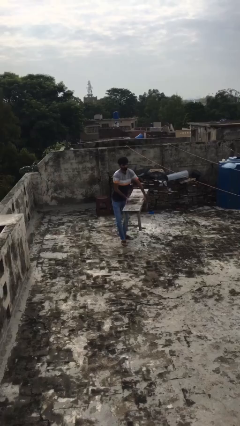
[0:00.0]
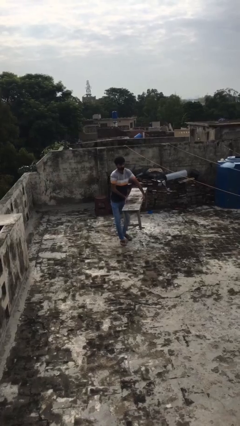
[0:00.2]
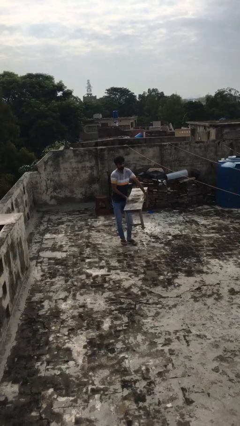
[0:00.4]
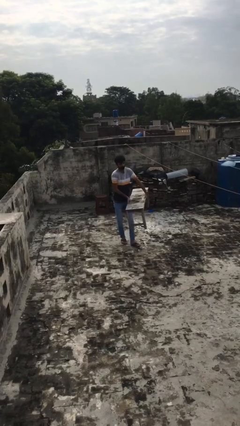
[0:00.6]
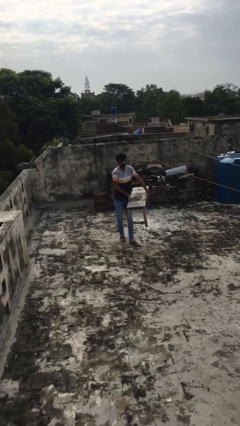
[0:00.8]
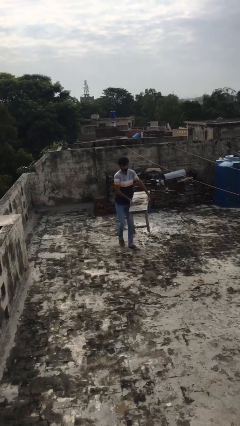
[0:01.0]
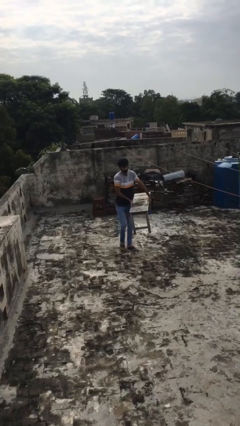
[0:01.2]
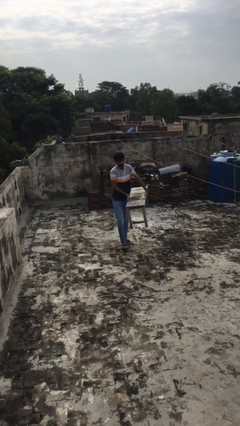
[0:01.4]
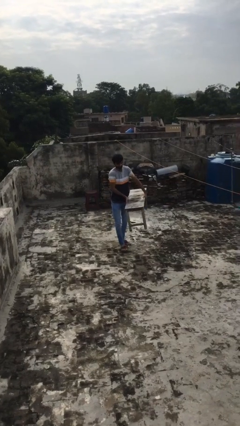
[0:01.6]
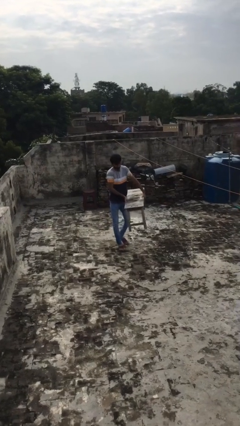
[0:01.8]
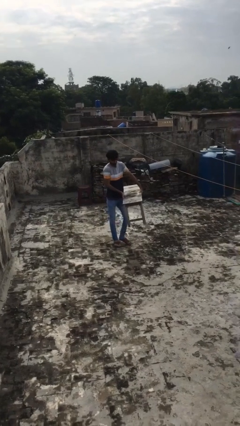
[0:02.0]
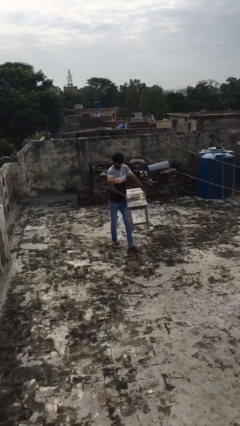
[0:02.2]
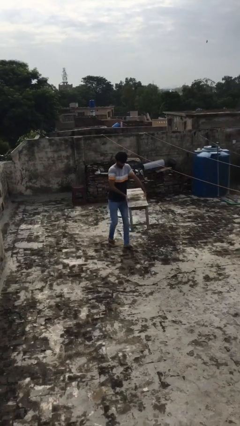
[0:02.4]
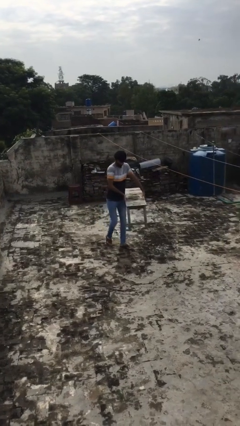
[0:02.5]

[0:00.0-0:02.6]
person carries heavy object

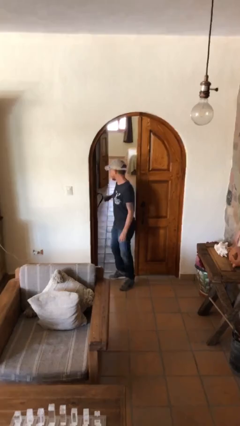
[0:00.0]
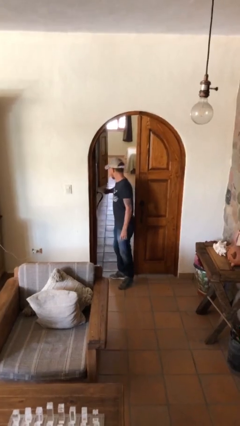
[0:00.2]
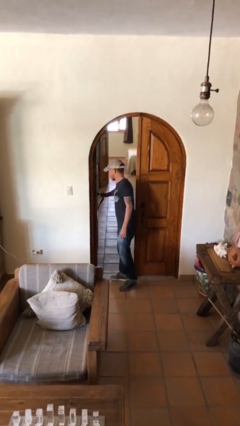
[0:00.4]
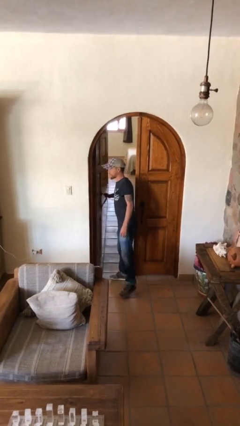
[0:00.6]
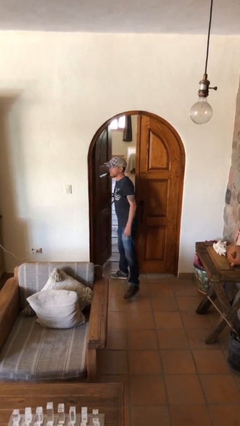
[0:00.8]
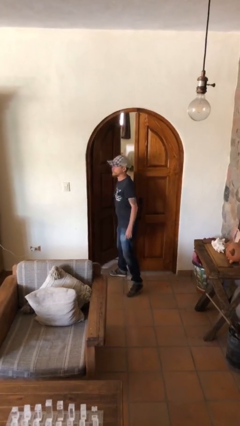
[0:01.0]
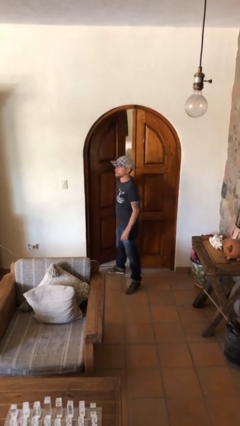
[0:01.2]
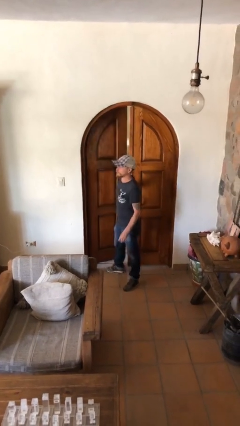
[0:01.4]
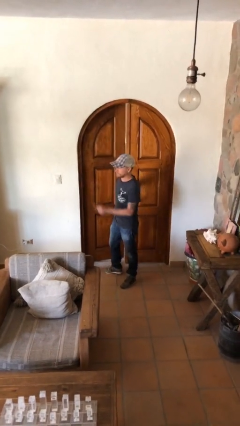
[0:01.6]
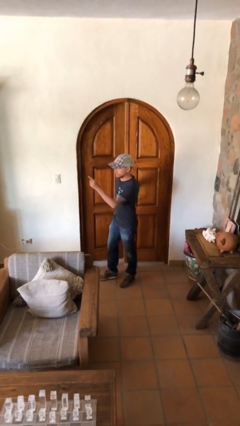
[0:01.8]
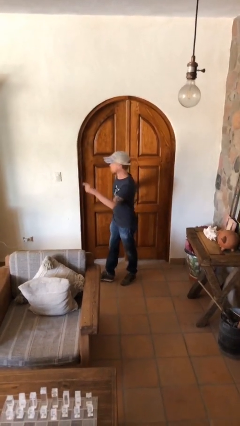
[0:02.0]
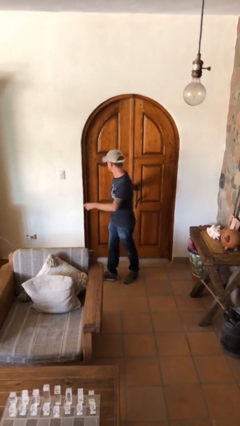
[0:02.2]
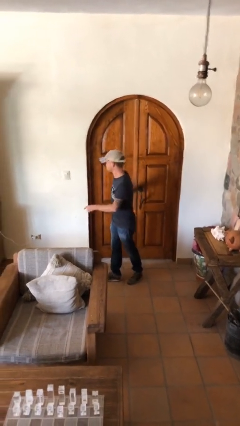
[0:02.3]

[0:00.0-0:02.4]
person closes facility door

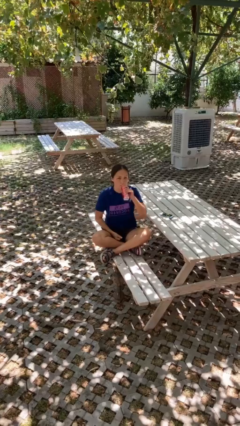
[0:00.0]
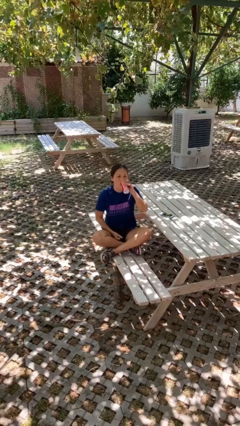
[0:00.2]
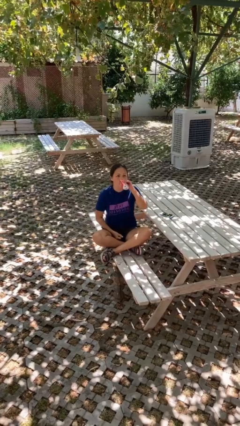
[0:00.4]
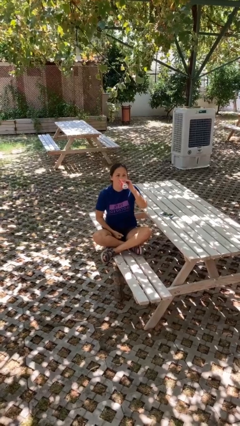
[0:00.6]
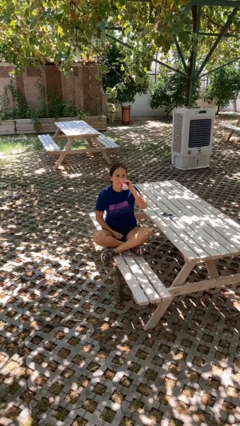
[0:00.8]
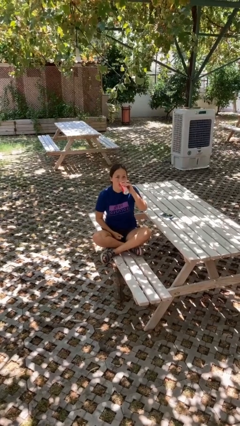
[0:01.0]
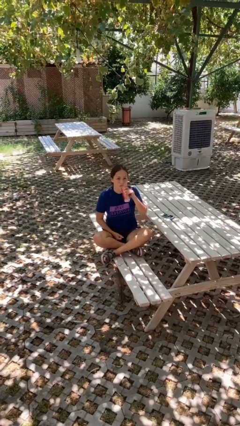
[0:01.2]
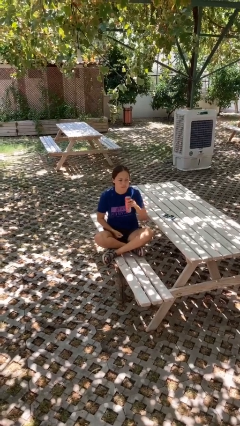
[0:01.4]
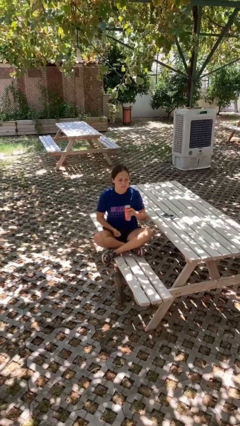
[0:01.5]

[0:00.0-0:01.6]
person drinks from beverage can

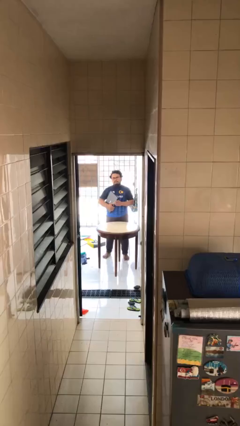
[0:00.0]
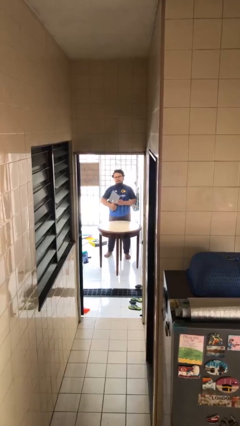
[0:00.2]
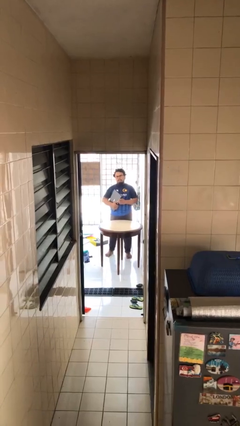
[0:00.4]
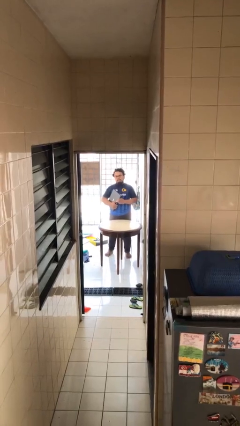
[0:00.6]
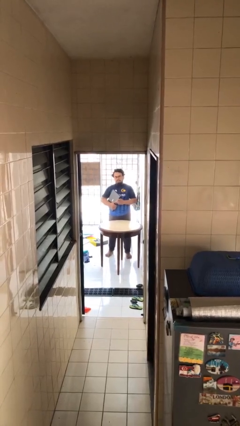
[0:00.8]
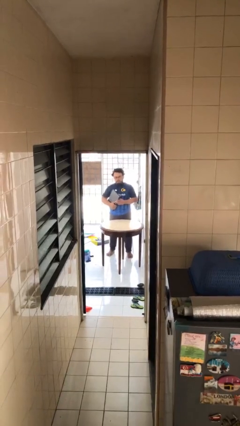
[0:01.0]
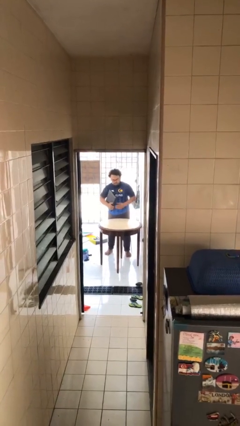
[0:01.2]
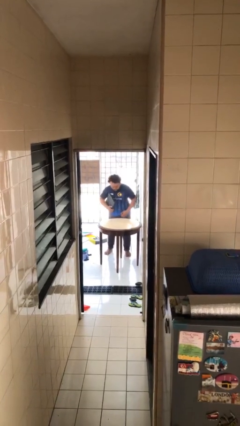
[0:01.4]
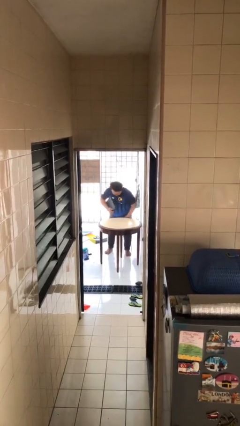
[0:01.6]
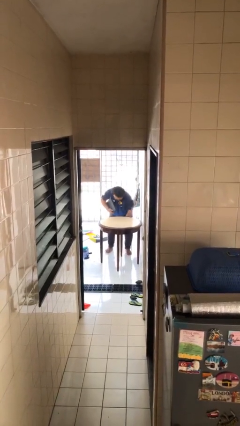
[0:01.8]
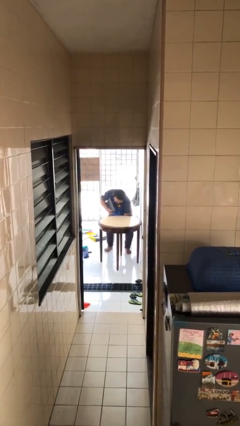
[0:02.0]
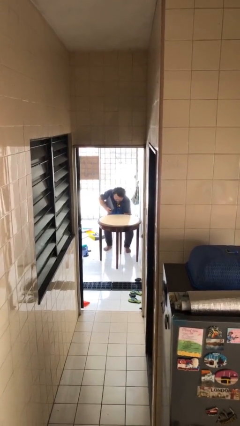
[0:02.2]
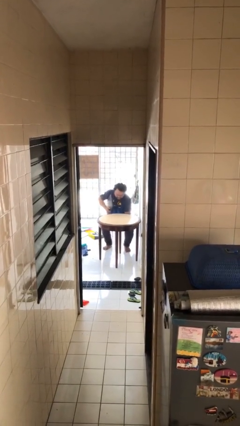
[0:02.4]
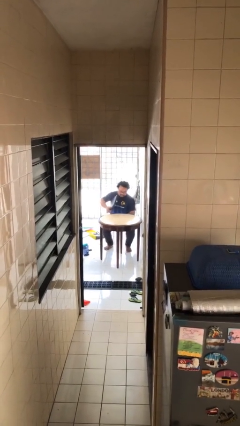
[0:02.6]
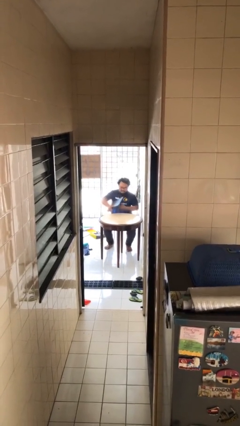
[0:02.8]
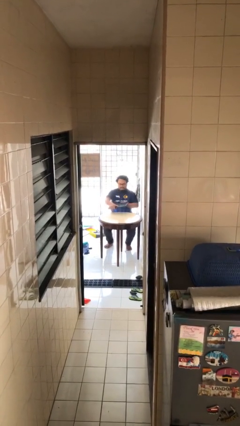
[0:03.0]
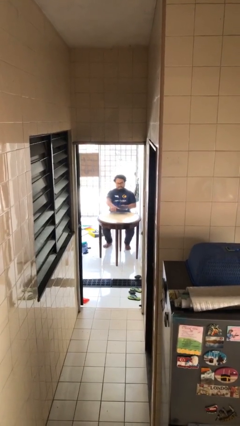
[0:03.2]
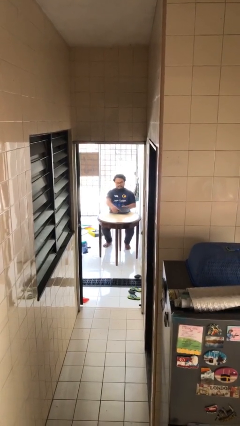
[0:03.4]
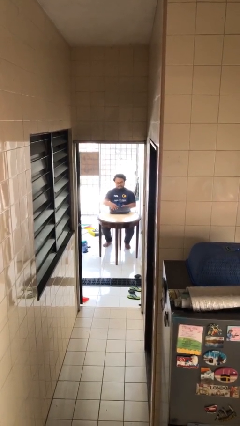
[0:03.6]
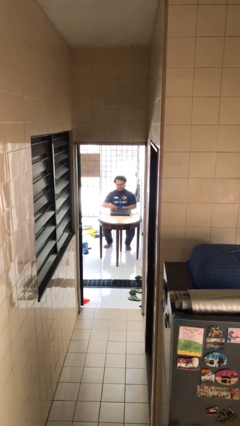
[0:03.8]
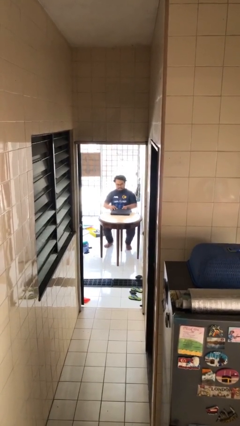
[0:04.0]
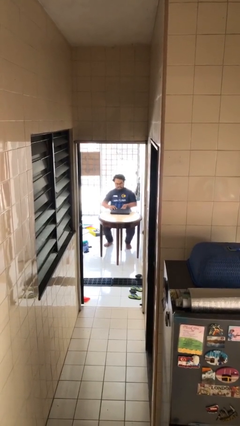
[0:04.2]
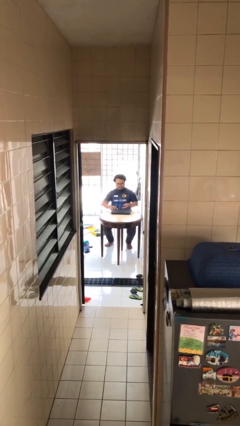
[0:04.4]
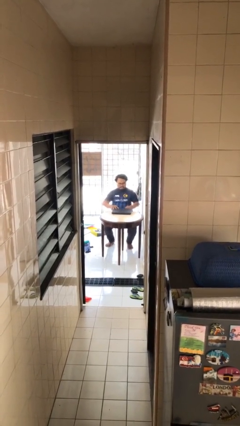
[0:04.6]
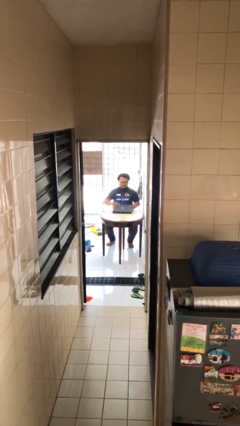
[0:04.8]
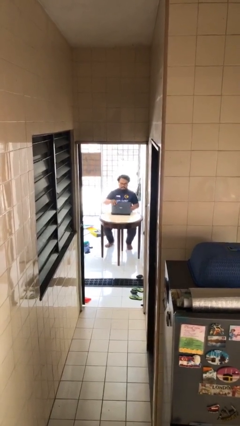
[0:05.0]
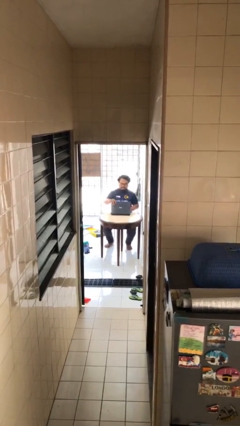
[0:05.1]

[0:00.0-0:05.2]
person sits down

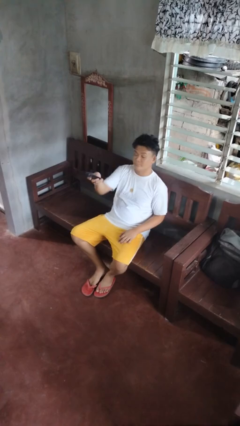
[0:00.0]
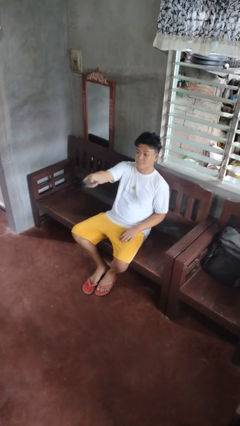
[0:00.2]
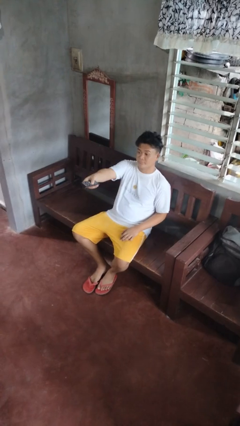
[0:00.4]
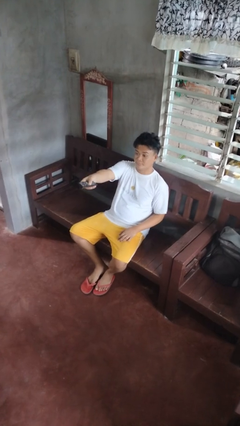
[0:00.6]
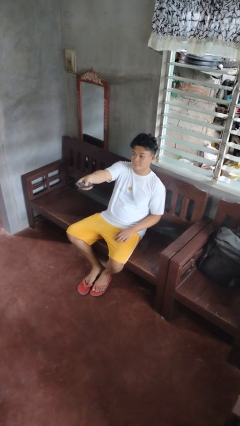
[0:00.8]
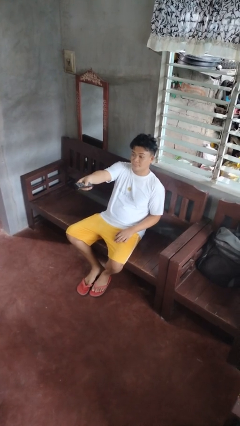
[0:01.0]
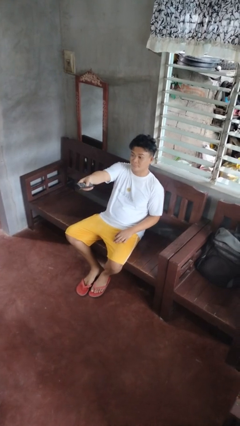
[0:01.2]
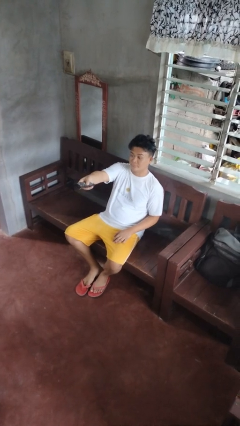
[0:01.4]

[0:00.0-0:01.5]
person uses television remote

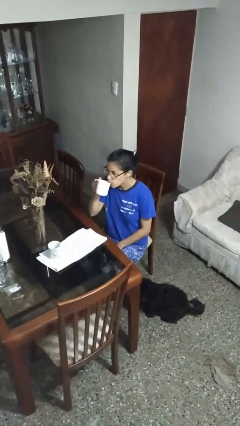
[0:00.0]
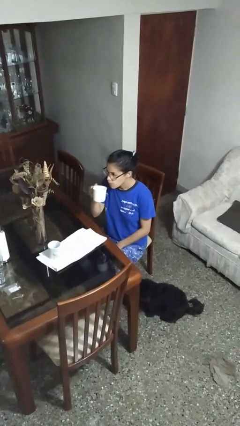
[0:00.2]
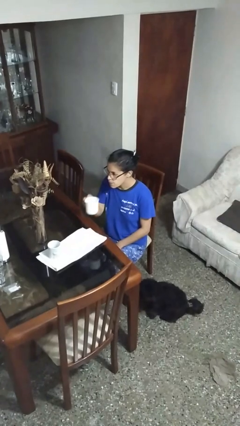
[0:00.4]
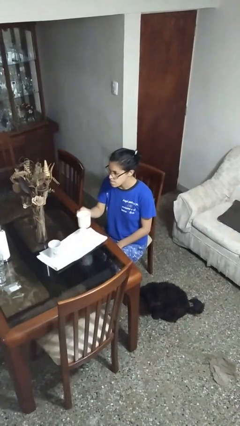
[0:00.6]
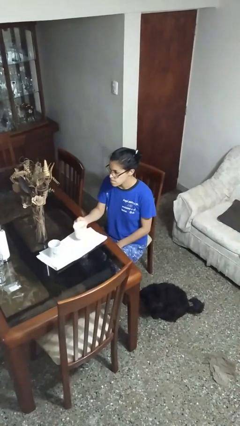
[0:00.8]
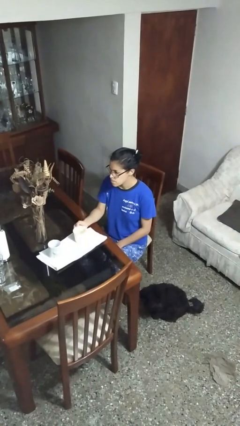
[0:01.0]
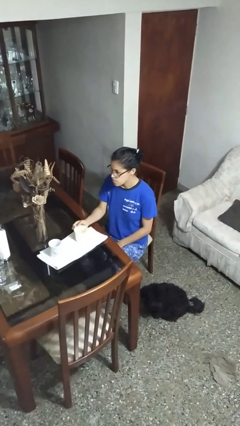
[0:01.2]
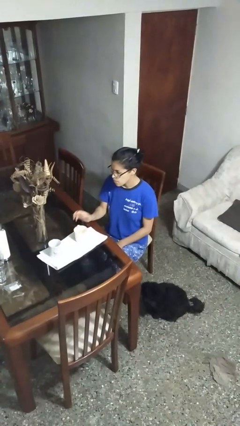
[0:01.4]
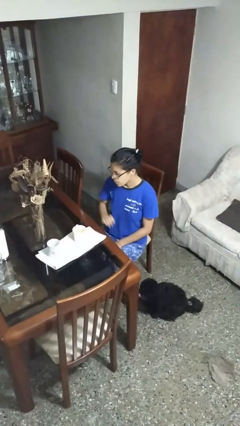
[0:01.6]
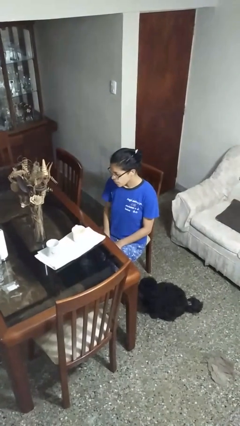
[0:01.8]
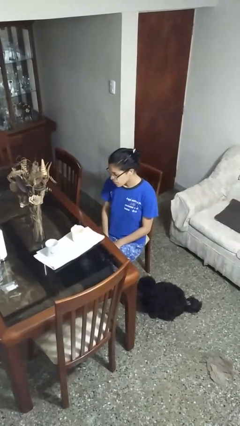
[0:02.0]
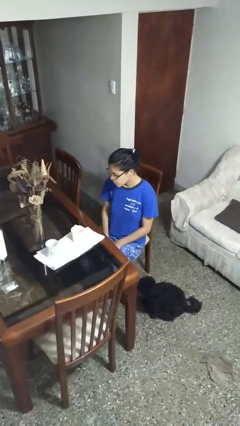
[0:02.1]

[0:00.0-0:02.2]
person puts down object on table

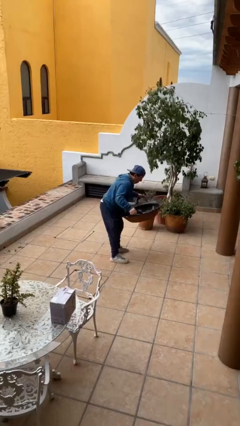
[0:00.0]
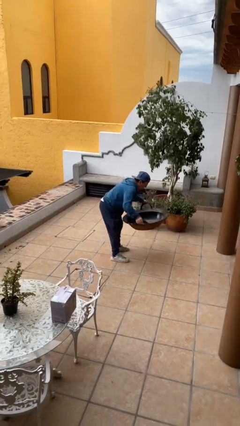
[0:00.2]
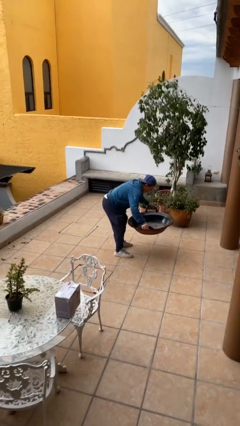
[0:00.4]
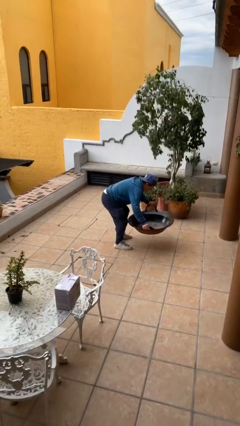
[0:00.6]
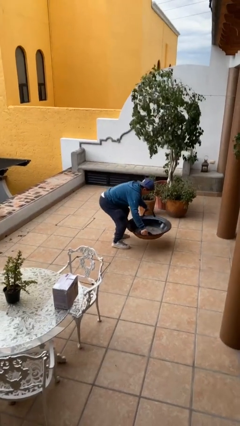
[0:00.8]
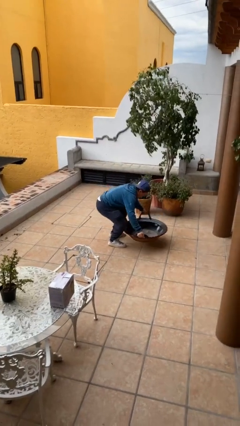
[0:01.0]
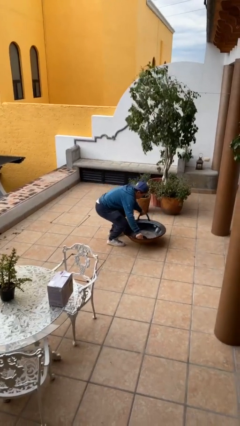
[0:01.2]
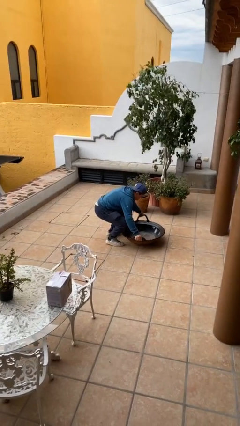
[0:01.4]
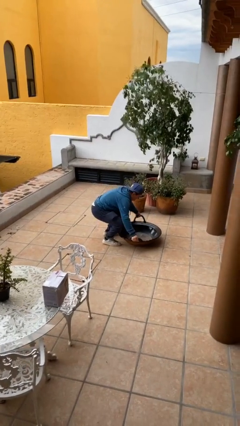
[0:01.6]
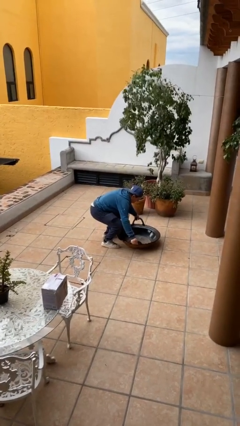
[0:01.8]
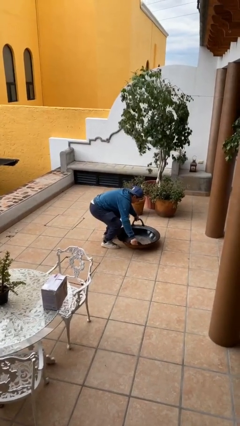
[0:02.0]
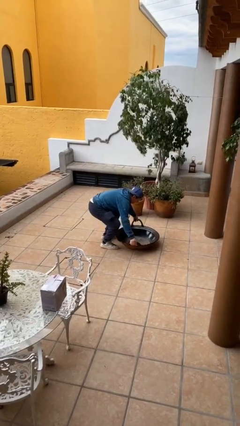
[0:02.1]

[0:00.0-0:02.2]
person puts down object on floor
